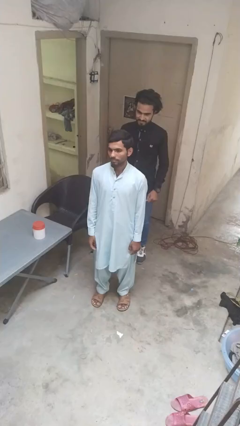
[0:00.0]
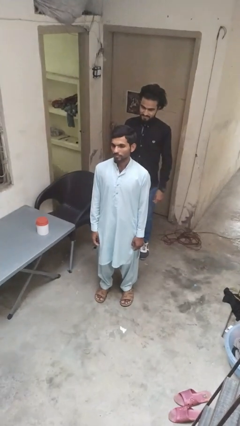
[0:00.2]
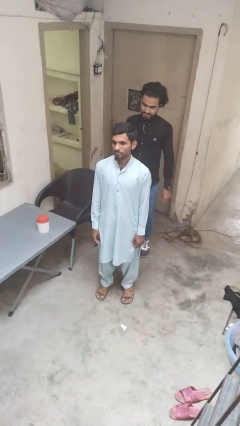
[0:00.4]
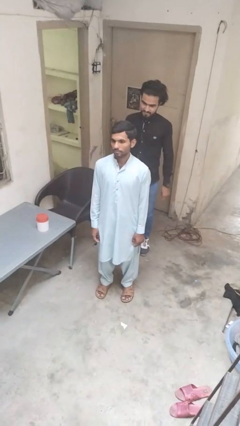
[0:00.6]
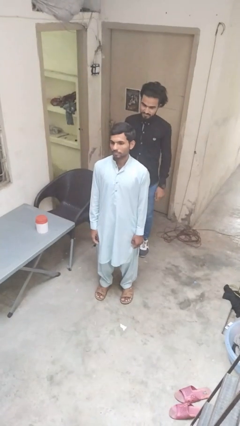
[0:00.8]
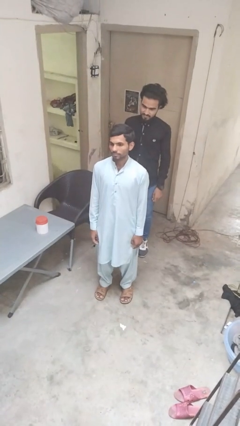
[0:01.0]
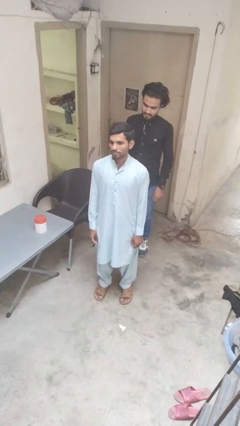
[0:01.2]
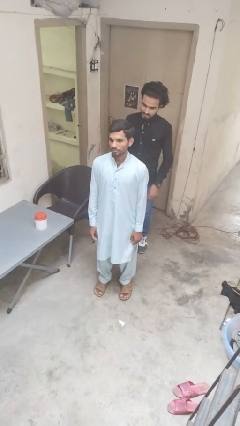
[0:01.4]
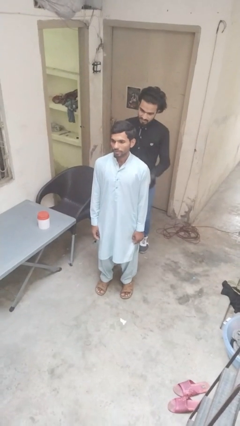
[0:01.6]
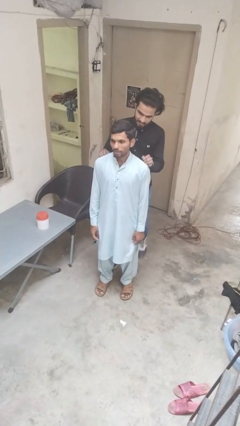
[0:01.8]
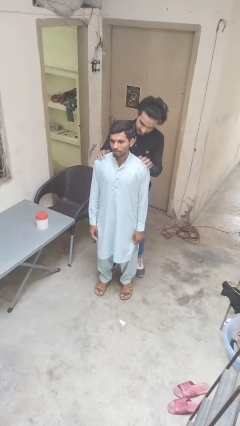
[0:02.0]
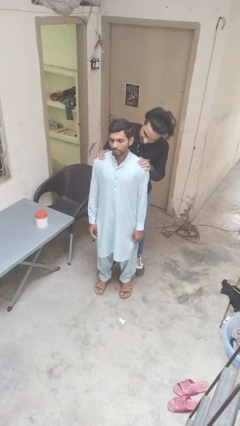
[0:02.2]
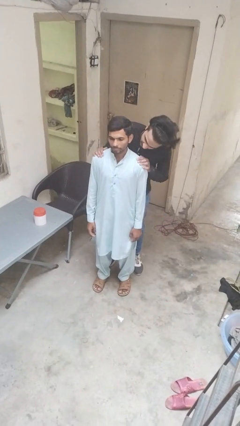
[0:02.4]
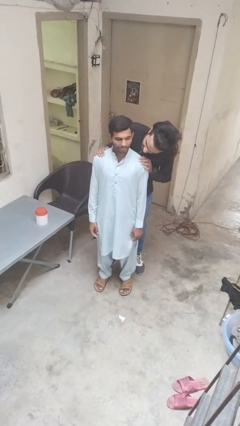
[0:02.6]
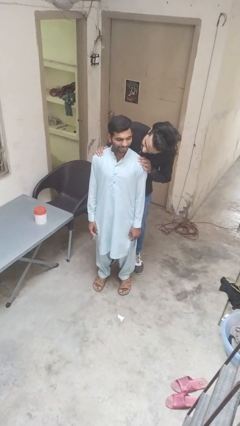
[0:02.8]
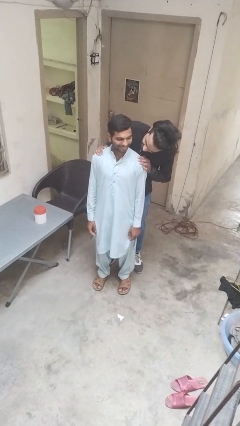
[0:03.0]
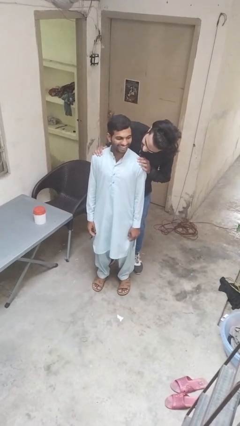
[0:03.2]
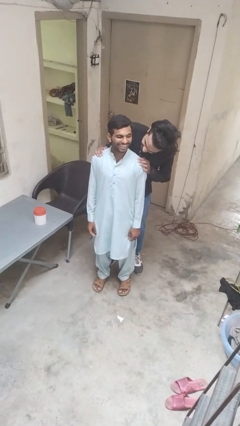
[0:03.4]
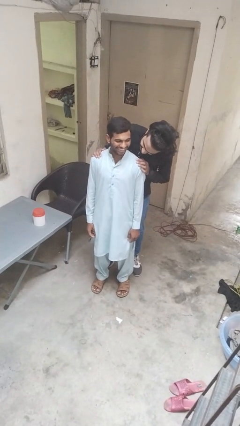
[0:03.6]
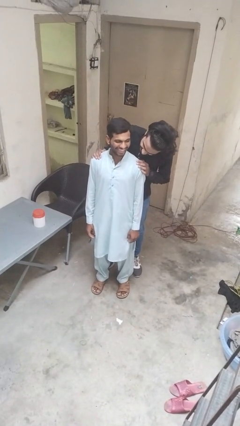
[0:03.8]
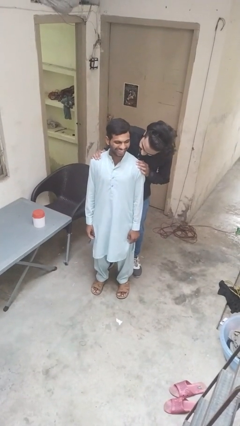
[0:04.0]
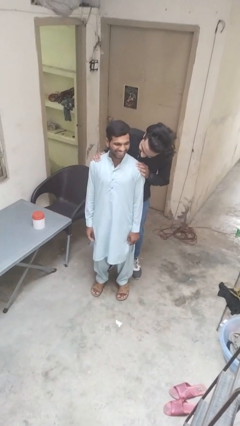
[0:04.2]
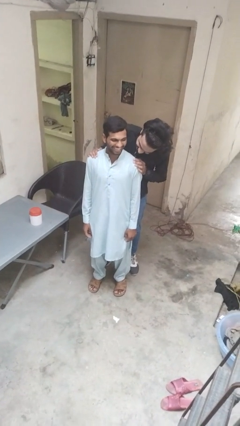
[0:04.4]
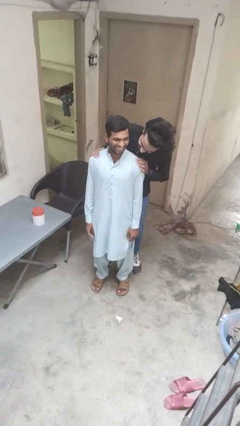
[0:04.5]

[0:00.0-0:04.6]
person looks over shoulder

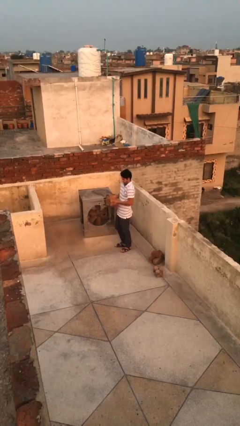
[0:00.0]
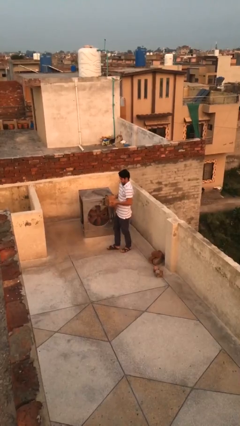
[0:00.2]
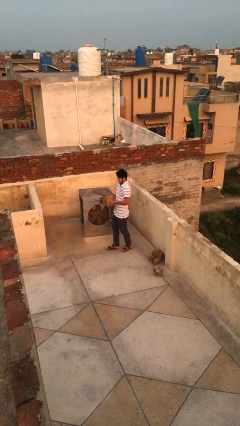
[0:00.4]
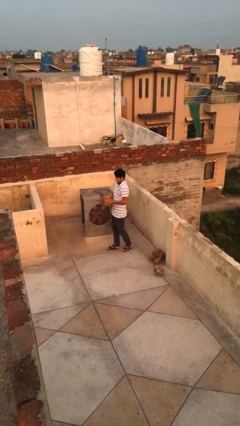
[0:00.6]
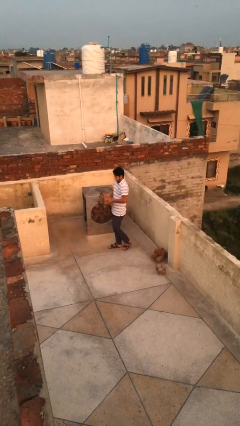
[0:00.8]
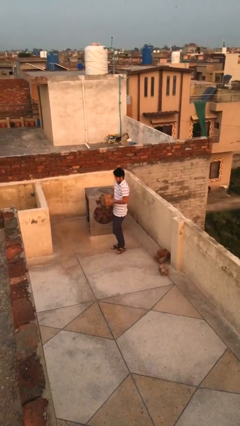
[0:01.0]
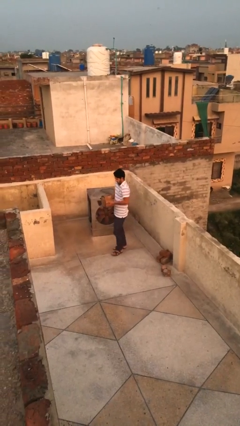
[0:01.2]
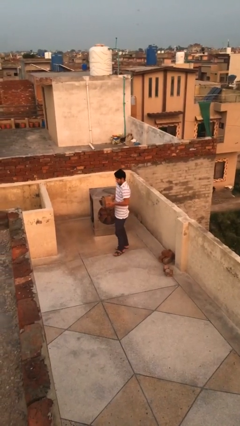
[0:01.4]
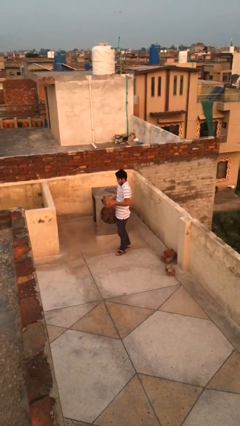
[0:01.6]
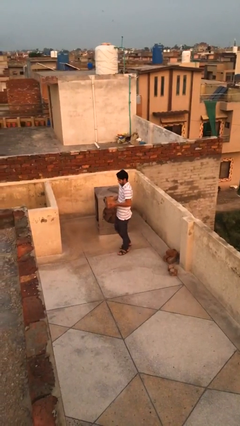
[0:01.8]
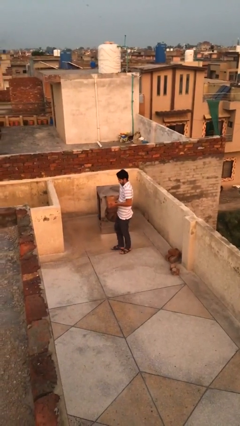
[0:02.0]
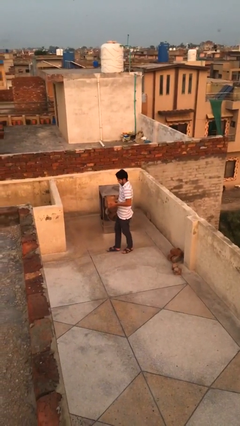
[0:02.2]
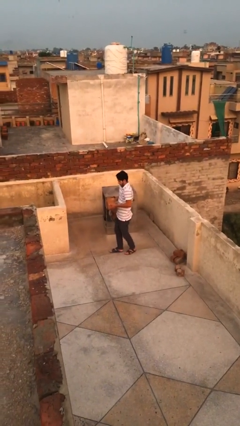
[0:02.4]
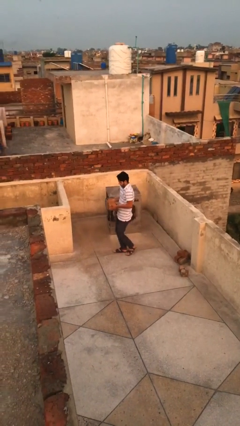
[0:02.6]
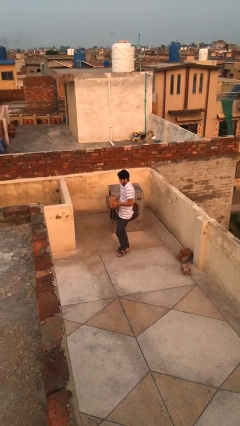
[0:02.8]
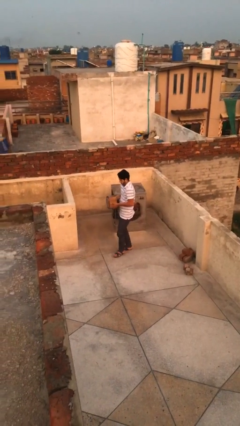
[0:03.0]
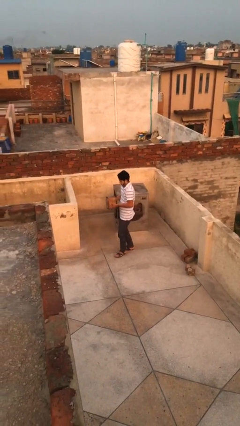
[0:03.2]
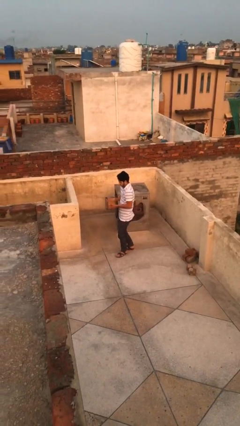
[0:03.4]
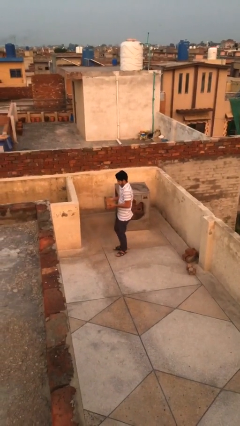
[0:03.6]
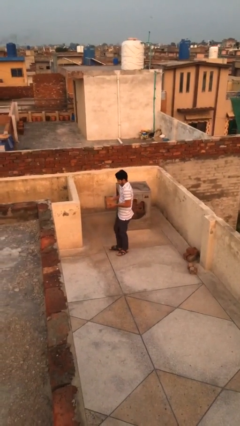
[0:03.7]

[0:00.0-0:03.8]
person carries heavy object

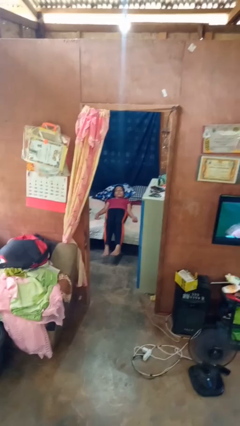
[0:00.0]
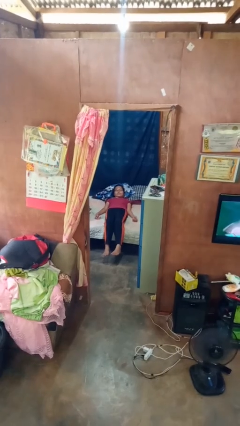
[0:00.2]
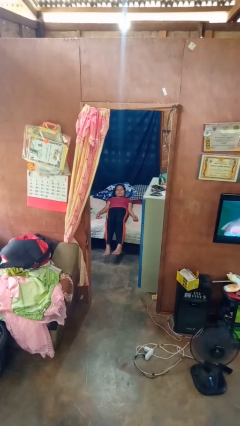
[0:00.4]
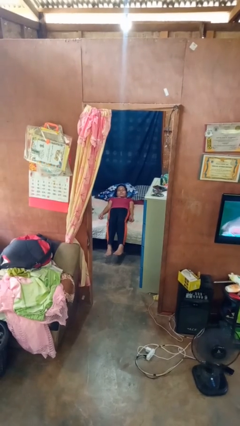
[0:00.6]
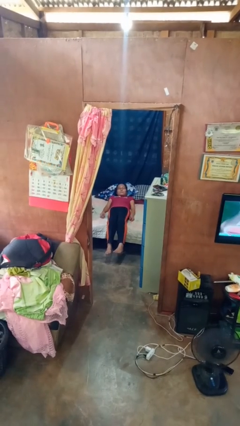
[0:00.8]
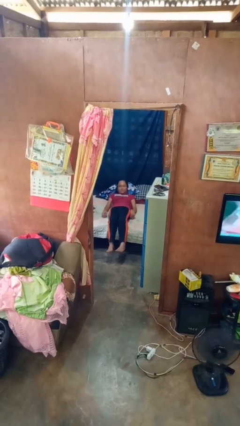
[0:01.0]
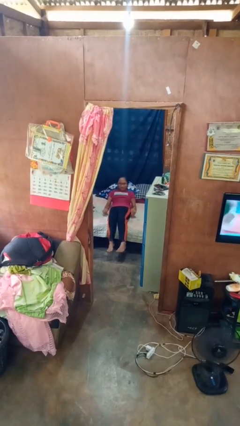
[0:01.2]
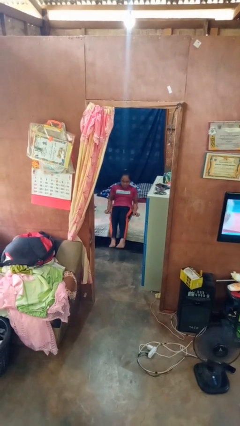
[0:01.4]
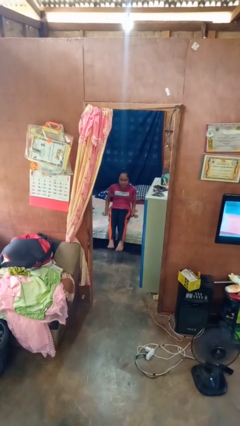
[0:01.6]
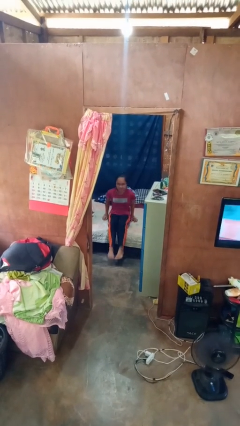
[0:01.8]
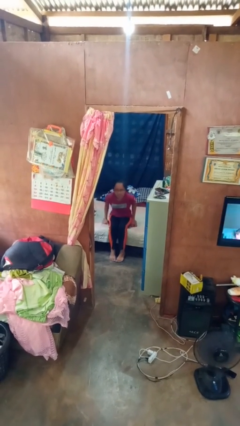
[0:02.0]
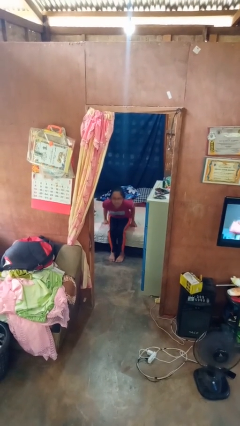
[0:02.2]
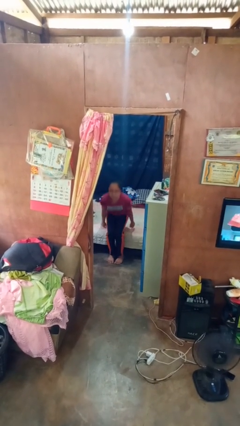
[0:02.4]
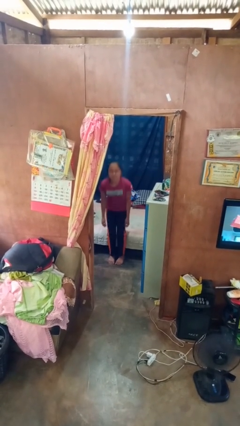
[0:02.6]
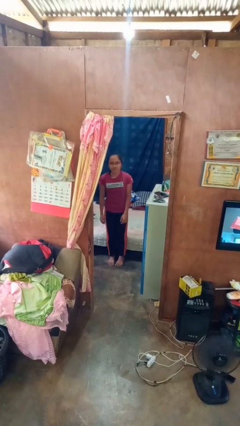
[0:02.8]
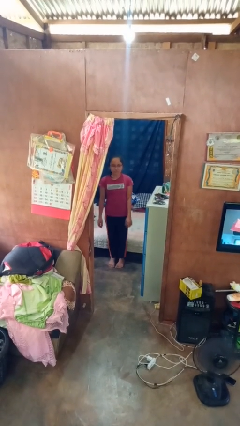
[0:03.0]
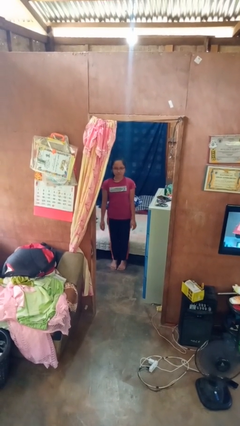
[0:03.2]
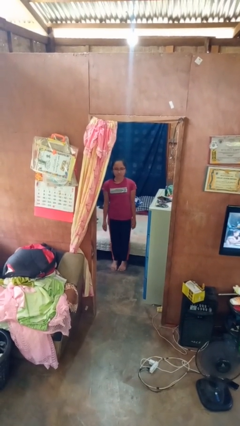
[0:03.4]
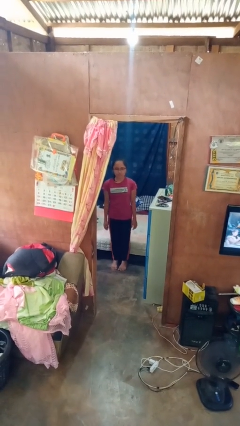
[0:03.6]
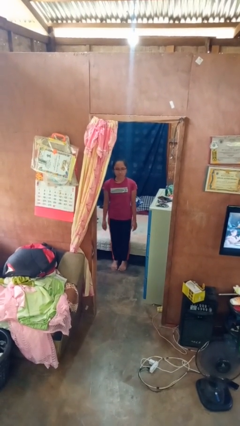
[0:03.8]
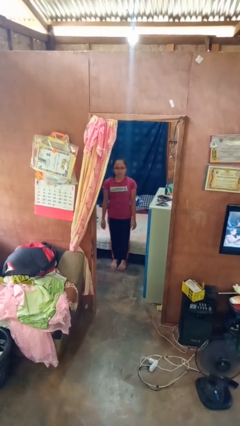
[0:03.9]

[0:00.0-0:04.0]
person stands up

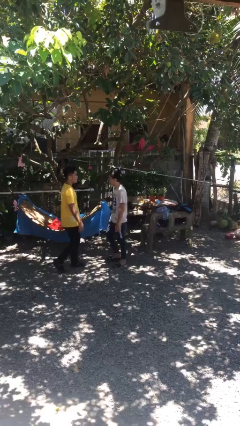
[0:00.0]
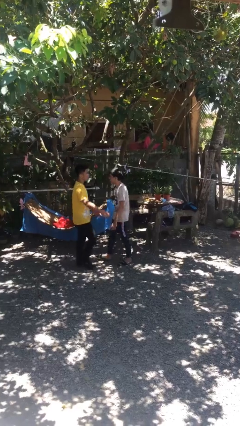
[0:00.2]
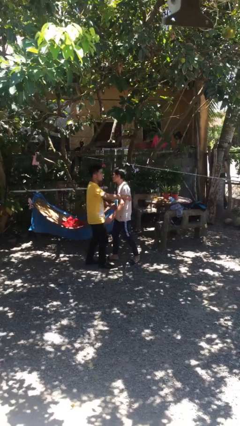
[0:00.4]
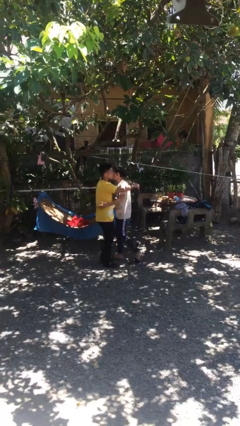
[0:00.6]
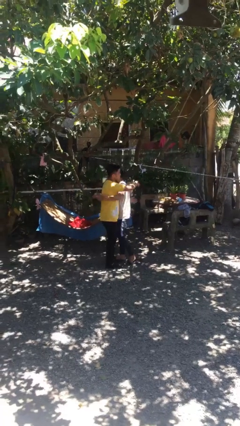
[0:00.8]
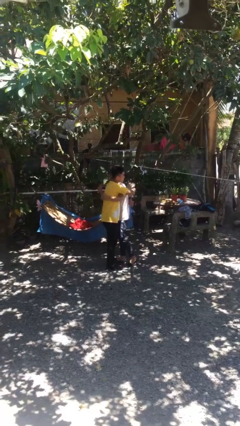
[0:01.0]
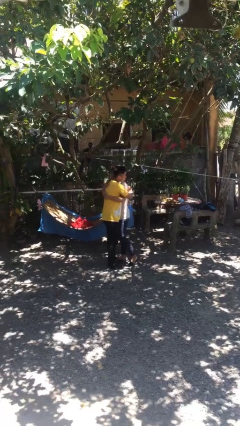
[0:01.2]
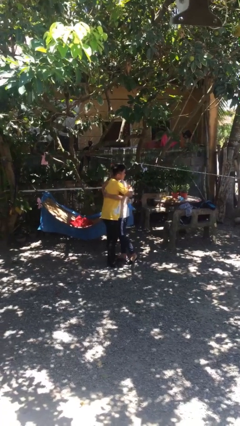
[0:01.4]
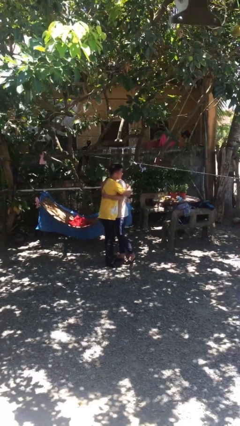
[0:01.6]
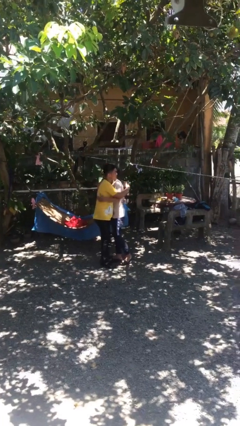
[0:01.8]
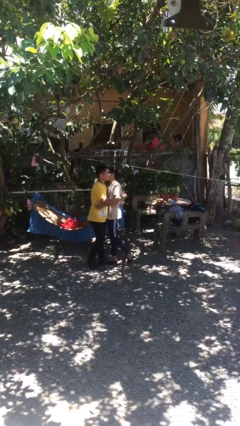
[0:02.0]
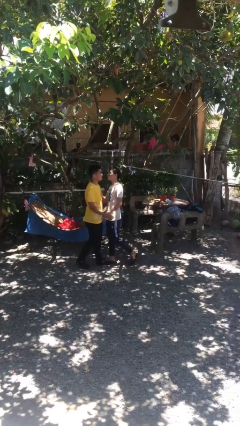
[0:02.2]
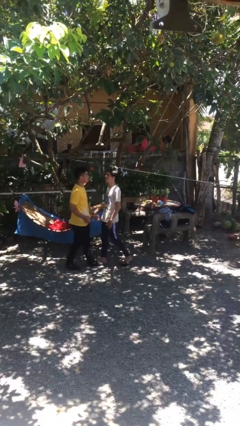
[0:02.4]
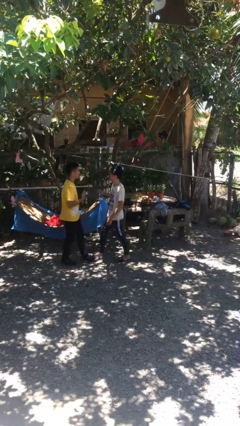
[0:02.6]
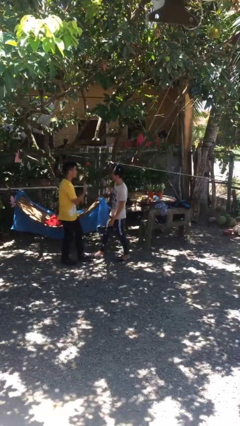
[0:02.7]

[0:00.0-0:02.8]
person embraces person

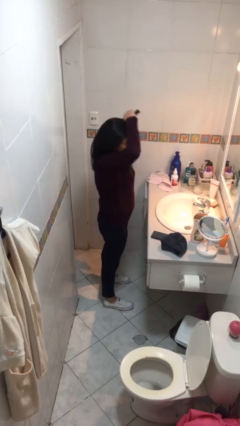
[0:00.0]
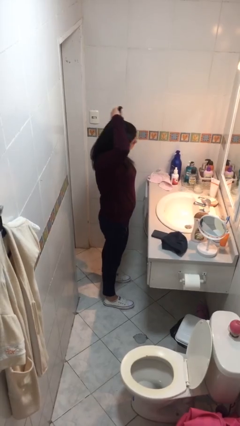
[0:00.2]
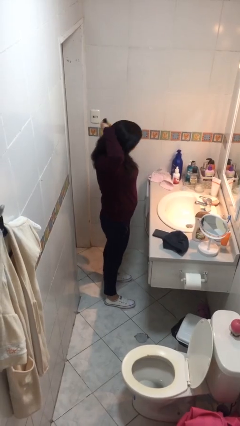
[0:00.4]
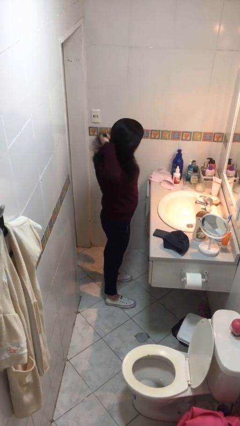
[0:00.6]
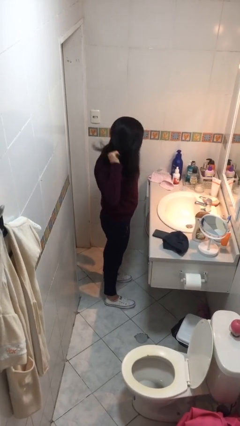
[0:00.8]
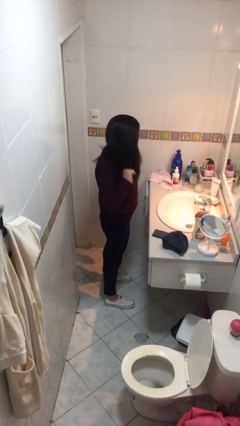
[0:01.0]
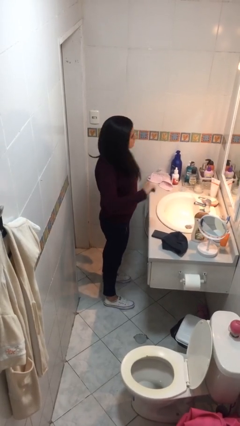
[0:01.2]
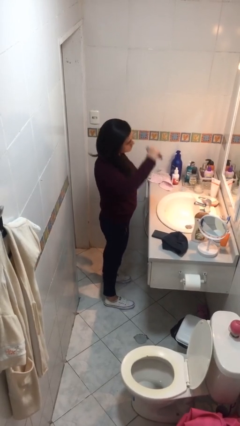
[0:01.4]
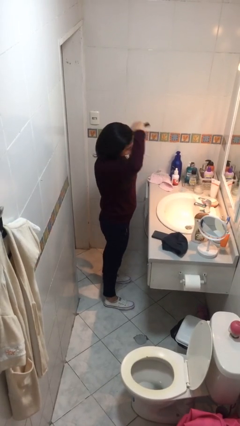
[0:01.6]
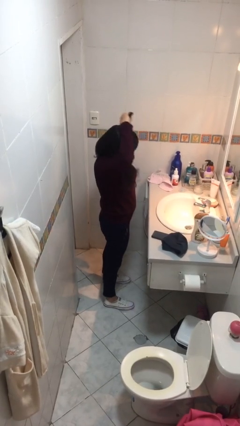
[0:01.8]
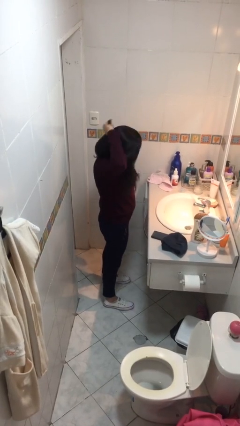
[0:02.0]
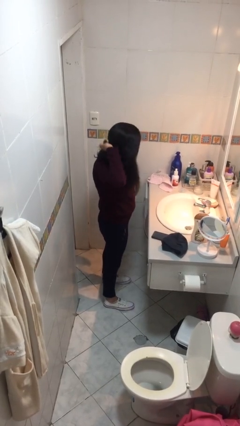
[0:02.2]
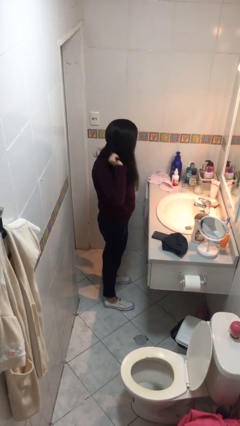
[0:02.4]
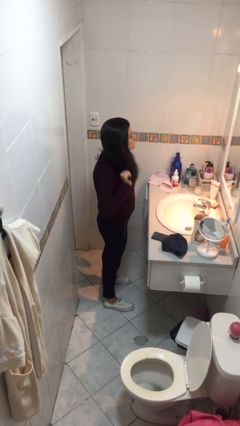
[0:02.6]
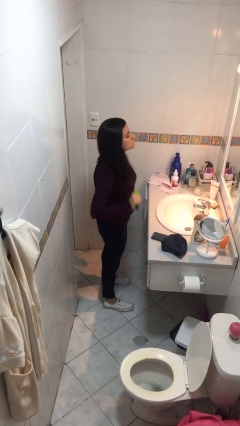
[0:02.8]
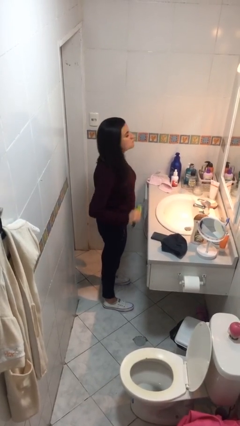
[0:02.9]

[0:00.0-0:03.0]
person brushes hair
